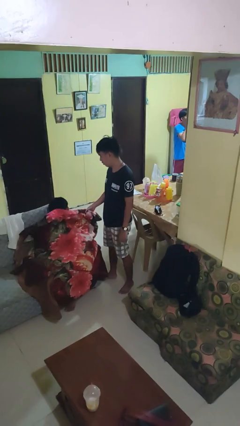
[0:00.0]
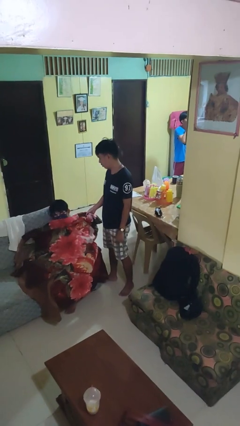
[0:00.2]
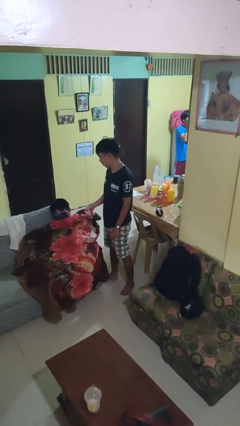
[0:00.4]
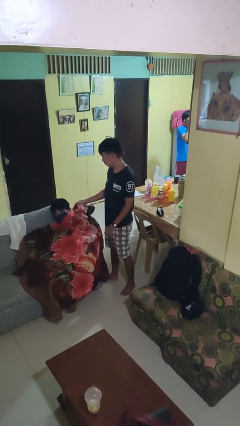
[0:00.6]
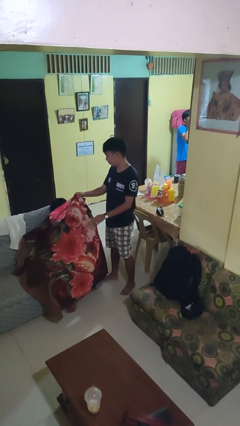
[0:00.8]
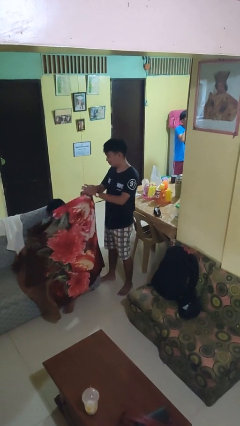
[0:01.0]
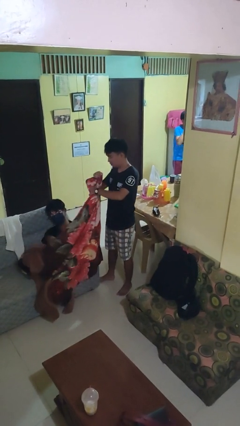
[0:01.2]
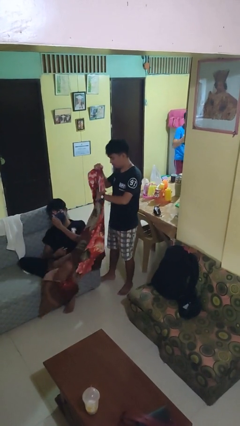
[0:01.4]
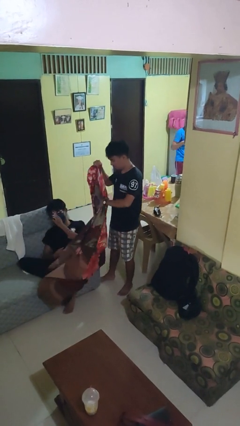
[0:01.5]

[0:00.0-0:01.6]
person uncovers friend with blanket

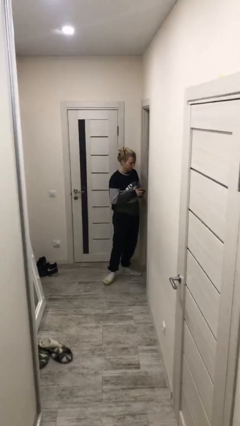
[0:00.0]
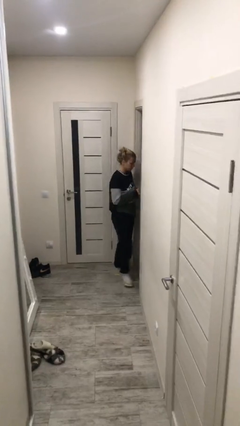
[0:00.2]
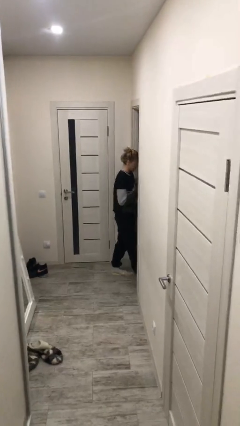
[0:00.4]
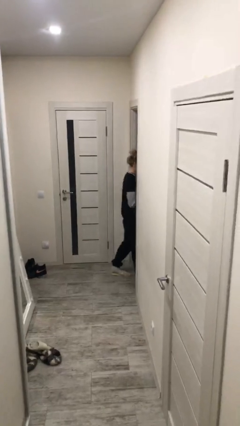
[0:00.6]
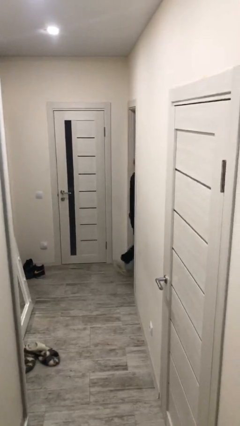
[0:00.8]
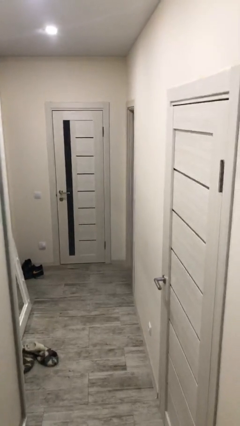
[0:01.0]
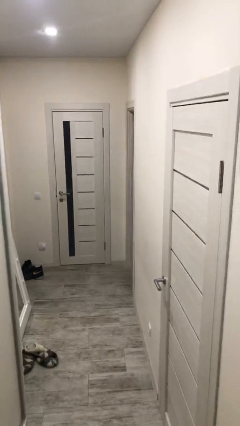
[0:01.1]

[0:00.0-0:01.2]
person exits scene through structure

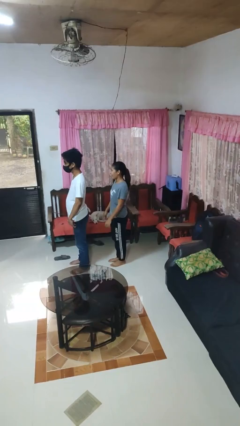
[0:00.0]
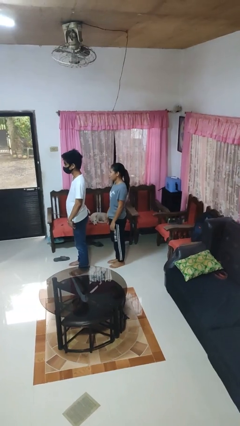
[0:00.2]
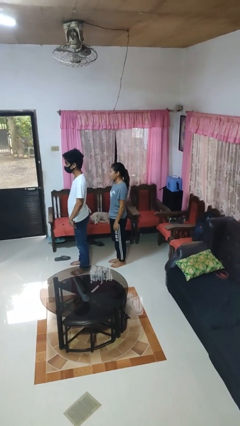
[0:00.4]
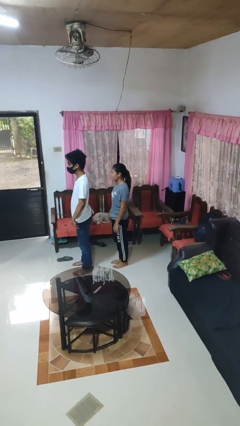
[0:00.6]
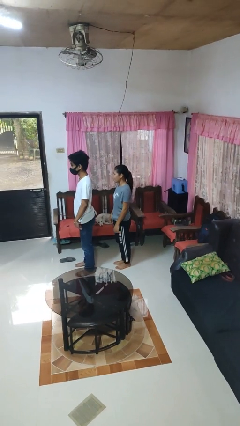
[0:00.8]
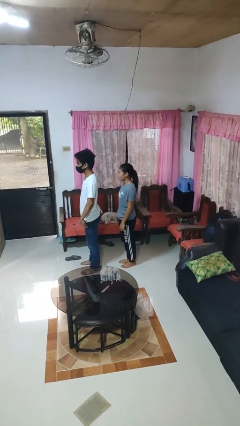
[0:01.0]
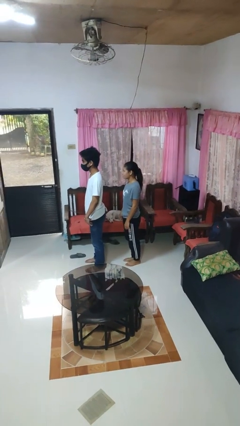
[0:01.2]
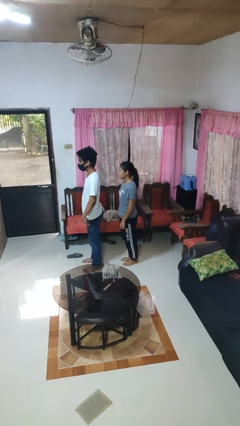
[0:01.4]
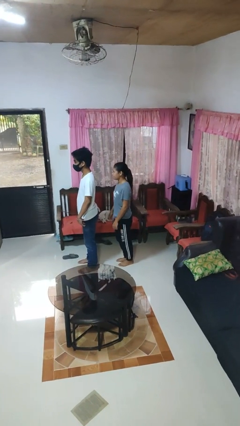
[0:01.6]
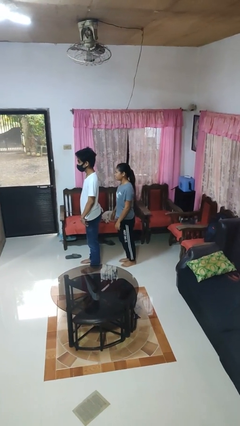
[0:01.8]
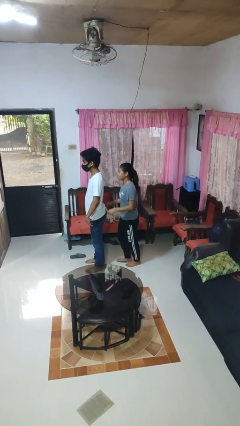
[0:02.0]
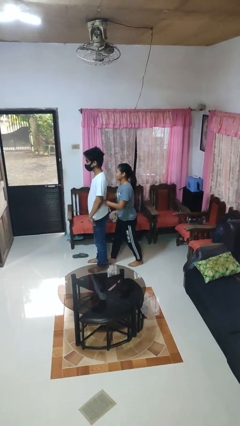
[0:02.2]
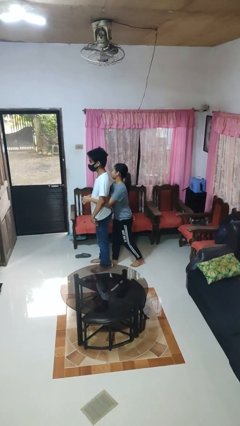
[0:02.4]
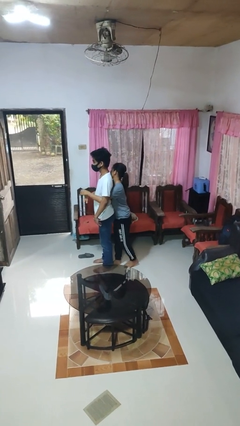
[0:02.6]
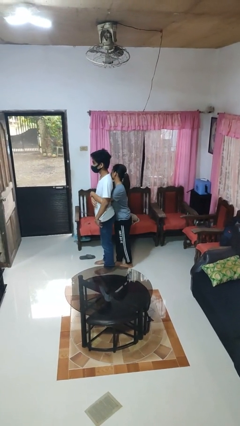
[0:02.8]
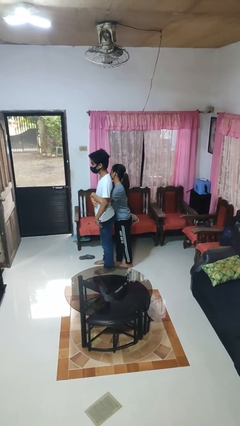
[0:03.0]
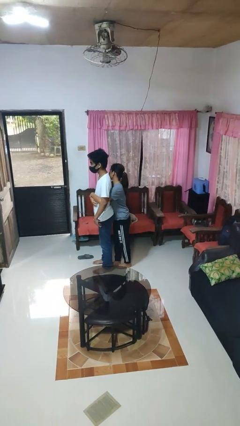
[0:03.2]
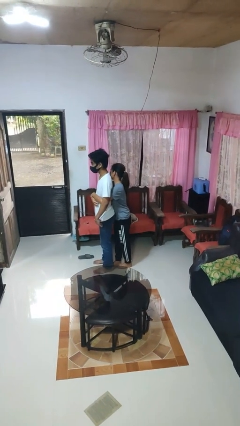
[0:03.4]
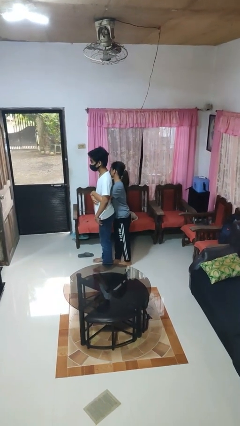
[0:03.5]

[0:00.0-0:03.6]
person hugs person from behind

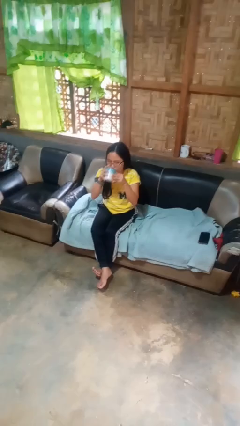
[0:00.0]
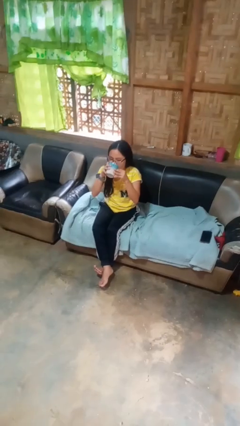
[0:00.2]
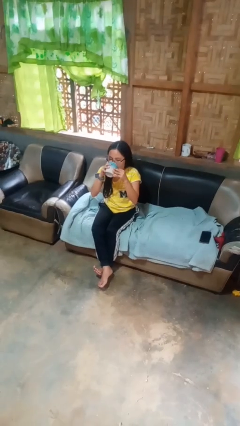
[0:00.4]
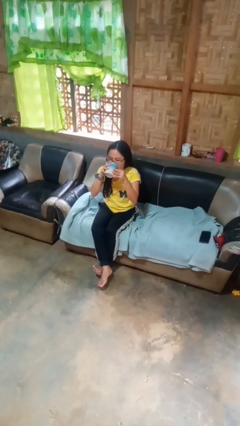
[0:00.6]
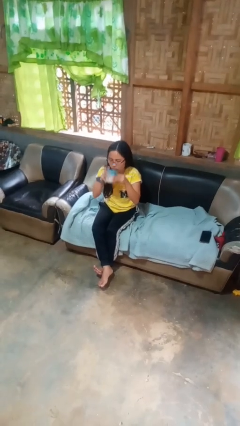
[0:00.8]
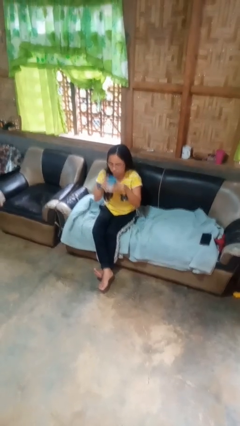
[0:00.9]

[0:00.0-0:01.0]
person drinks from mug

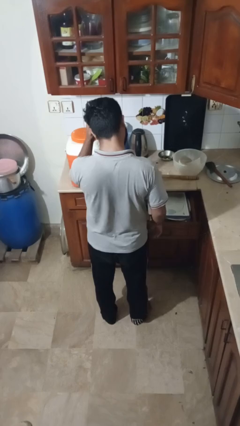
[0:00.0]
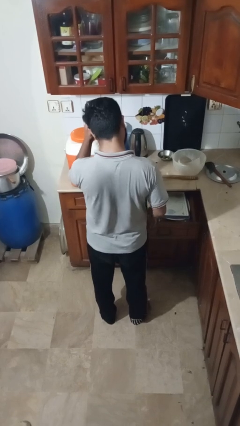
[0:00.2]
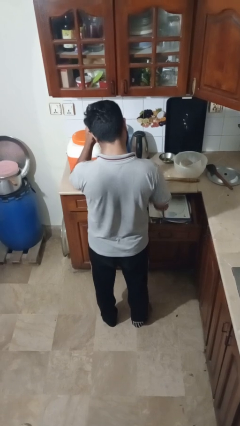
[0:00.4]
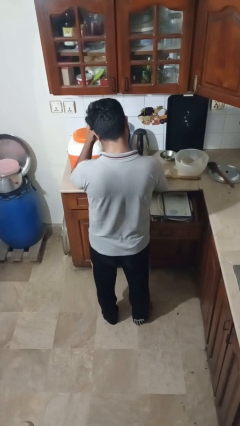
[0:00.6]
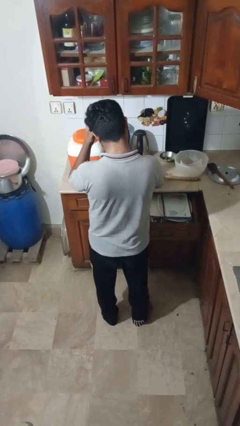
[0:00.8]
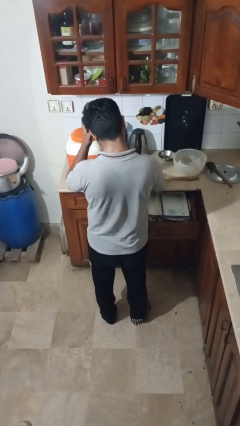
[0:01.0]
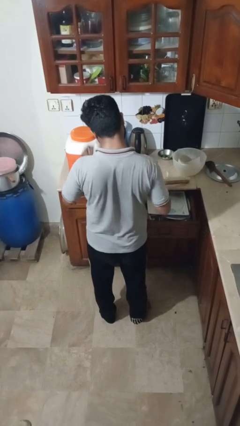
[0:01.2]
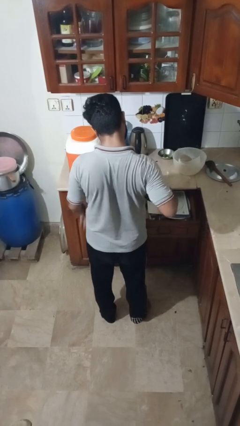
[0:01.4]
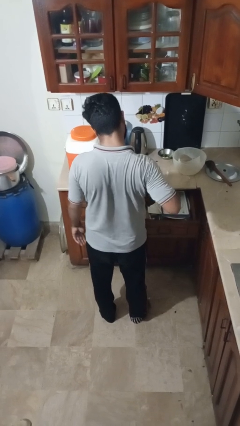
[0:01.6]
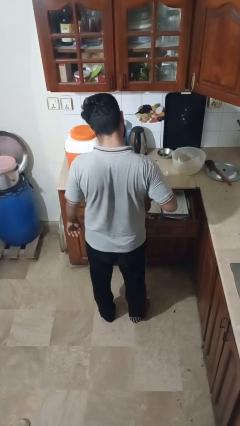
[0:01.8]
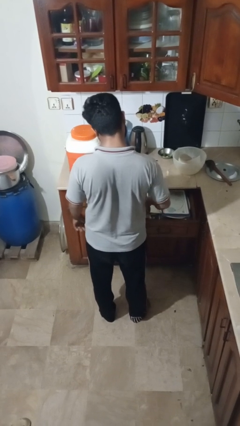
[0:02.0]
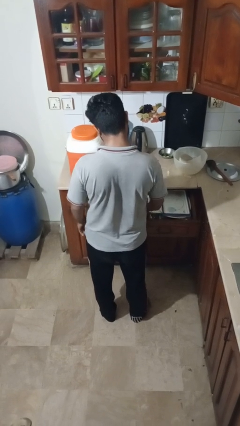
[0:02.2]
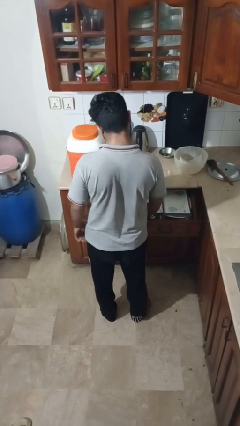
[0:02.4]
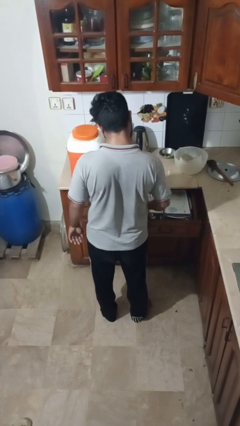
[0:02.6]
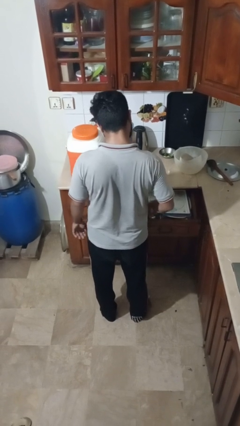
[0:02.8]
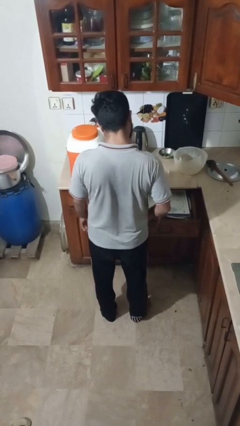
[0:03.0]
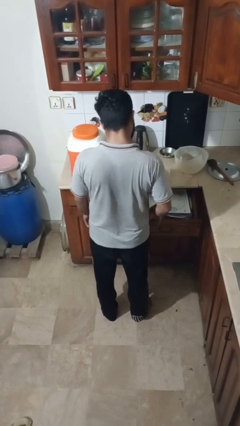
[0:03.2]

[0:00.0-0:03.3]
person puts object into kitchen drawer

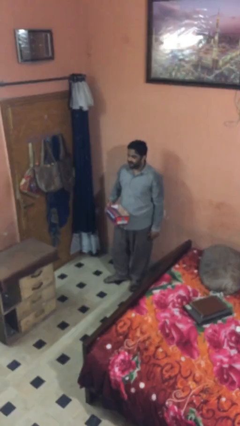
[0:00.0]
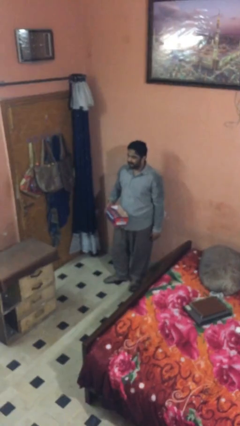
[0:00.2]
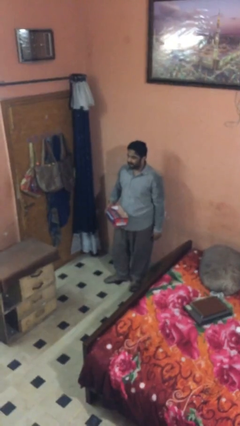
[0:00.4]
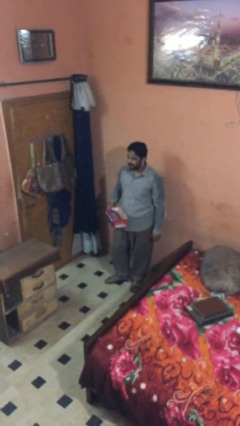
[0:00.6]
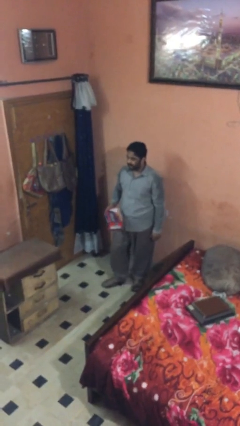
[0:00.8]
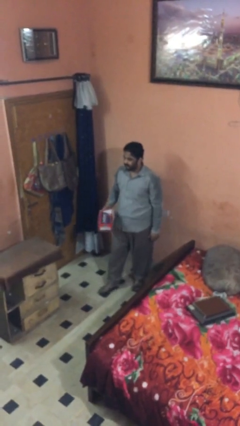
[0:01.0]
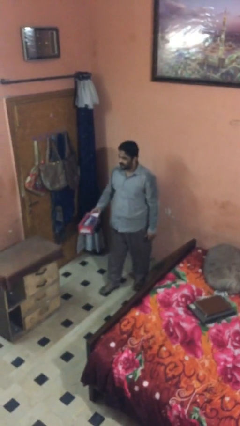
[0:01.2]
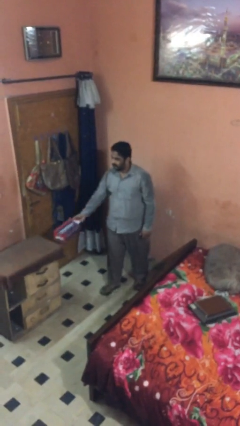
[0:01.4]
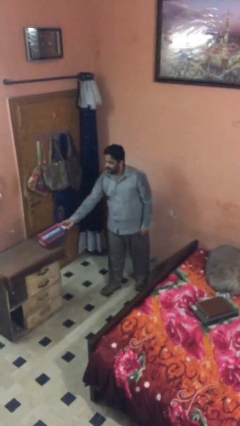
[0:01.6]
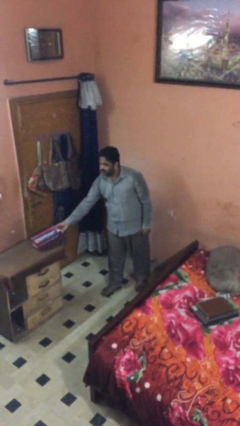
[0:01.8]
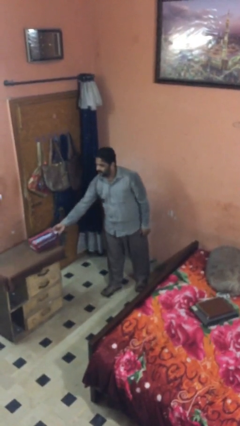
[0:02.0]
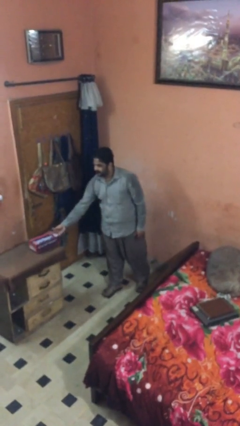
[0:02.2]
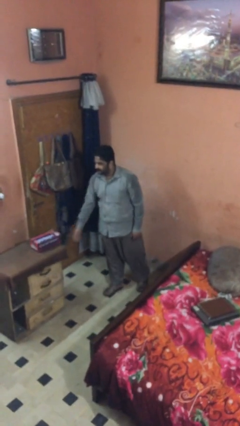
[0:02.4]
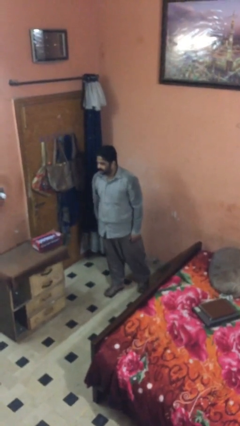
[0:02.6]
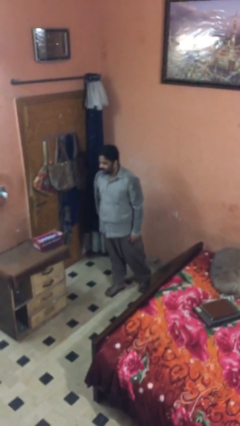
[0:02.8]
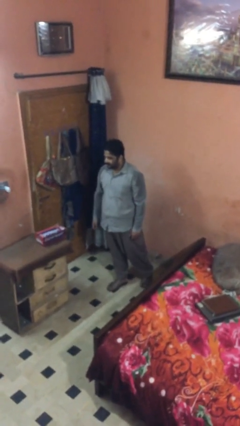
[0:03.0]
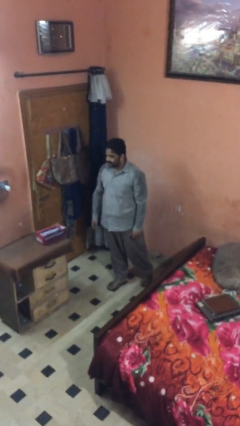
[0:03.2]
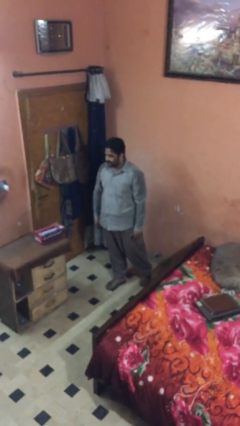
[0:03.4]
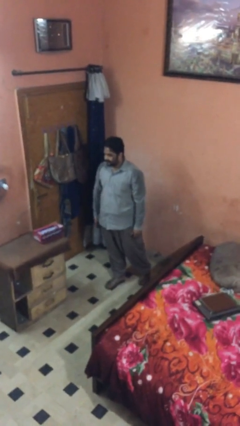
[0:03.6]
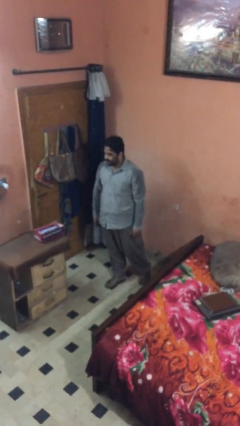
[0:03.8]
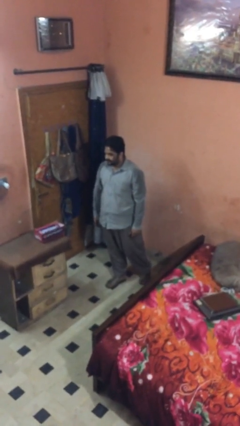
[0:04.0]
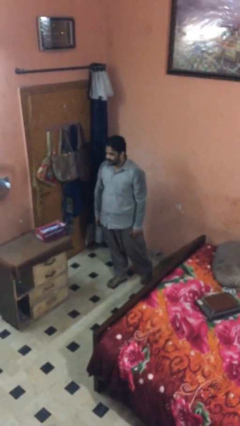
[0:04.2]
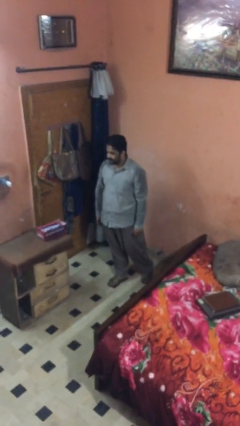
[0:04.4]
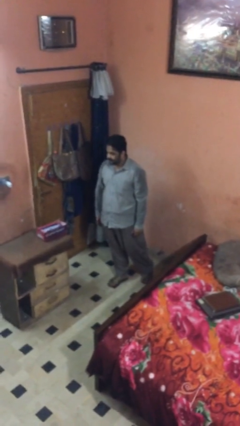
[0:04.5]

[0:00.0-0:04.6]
person puts down object on table

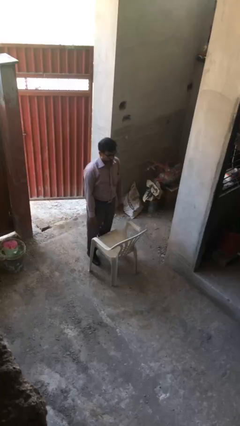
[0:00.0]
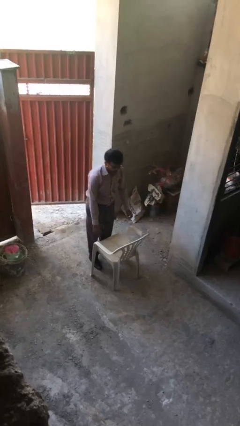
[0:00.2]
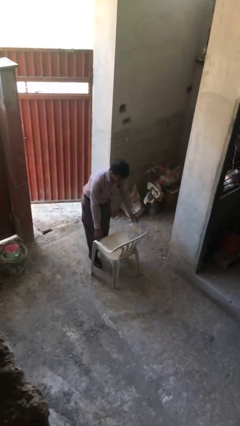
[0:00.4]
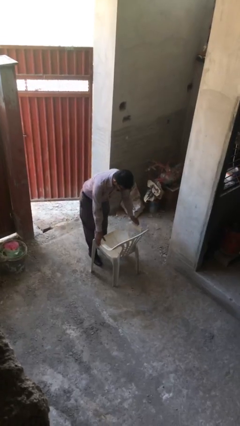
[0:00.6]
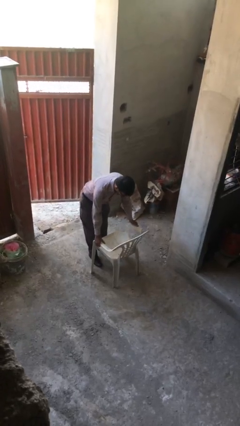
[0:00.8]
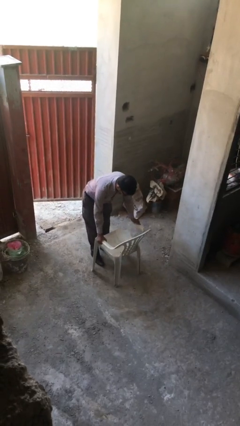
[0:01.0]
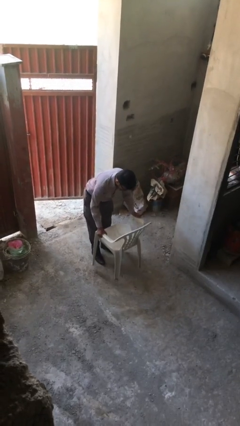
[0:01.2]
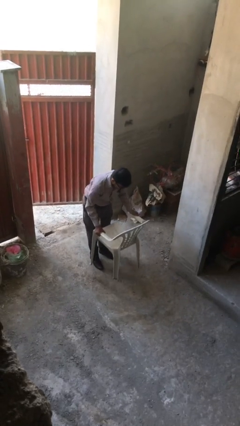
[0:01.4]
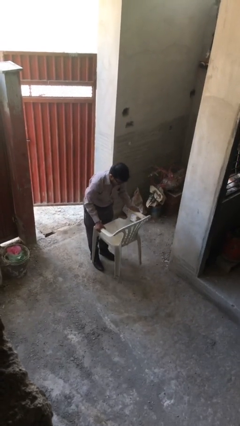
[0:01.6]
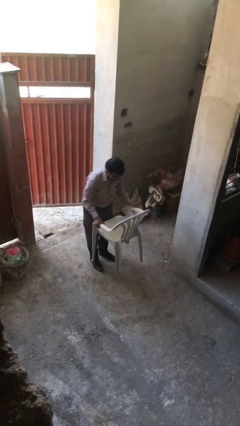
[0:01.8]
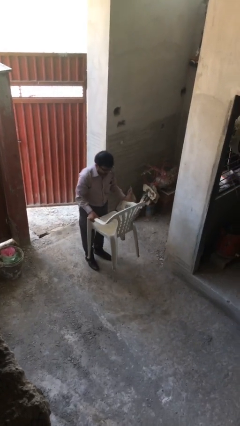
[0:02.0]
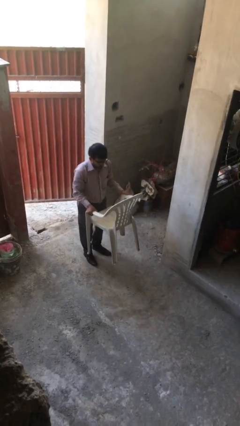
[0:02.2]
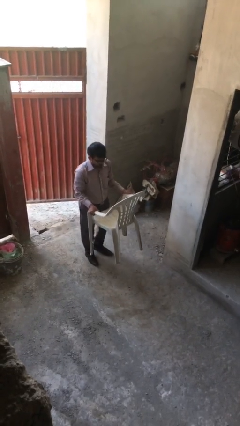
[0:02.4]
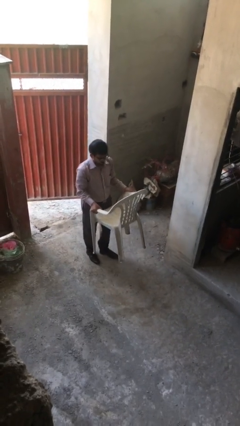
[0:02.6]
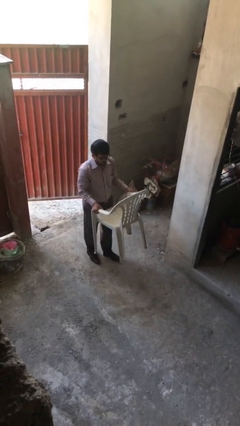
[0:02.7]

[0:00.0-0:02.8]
person picks up object from floor
